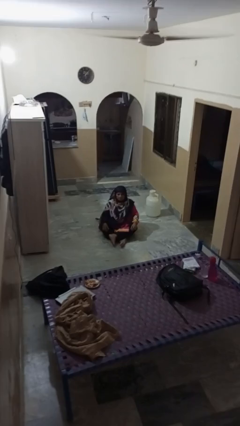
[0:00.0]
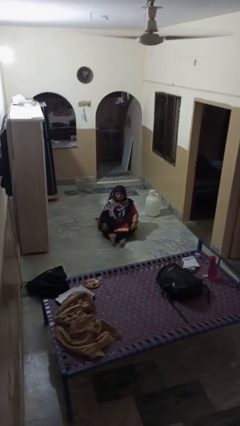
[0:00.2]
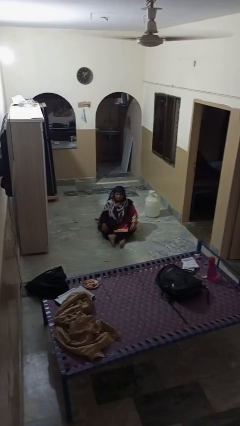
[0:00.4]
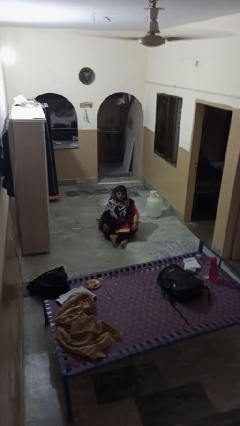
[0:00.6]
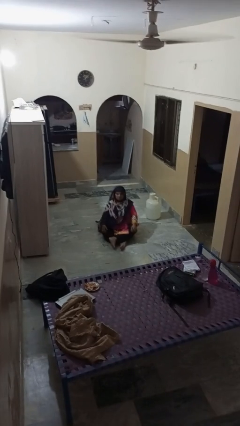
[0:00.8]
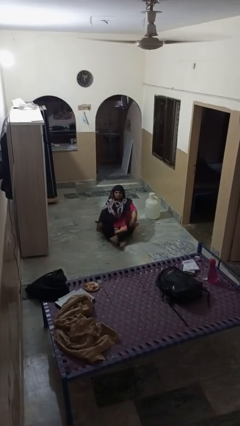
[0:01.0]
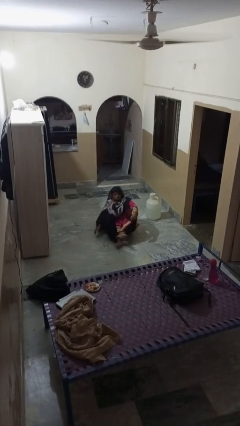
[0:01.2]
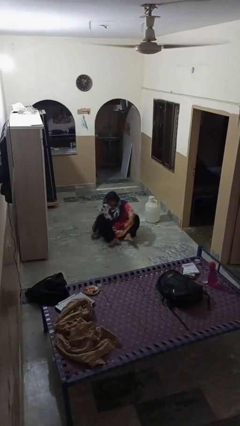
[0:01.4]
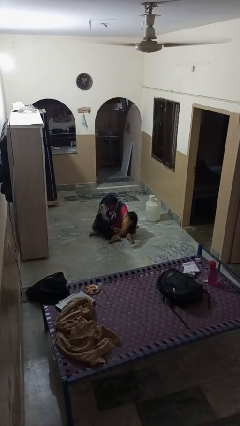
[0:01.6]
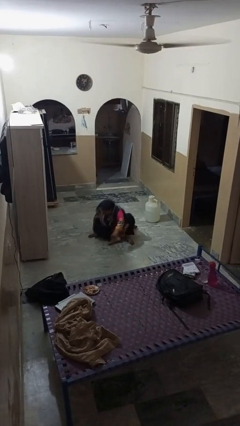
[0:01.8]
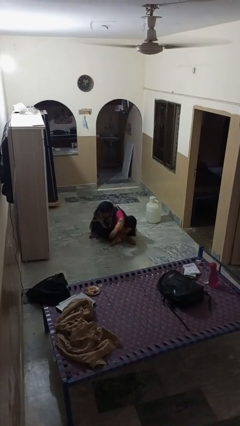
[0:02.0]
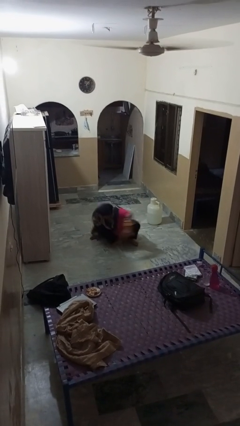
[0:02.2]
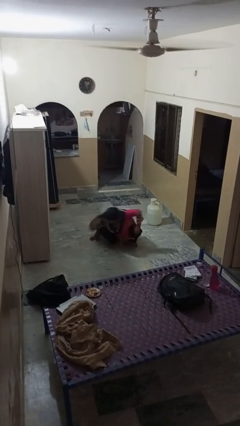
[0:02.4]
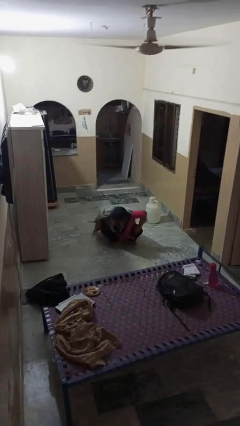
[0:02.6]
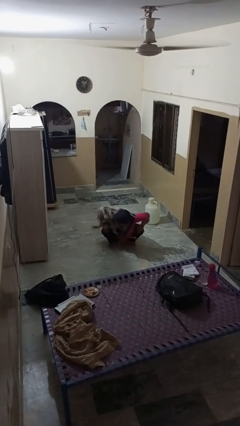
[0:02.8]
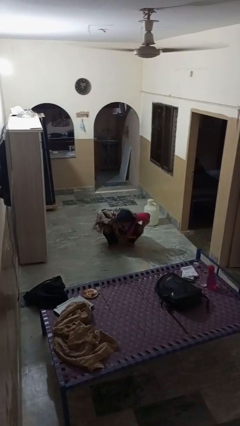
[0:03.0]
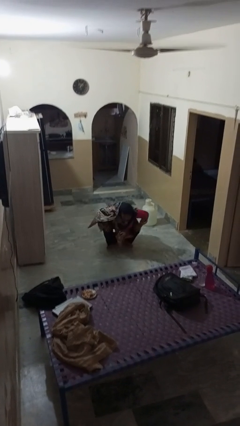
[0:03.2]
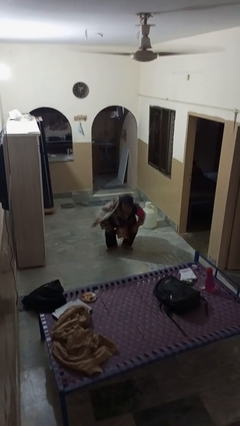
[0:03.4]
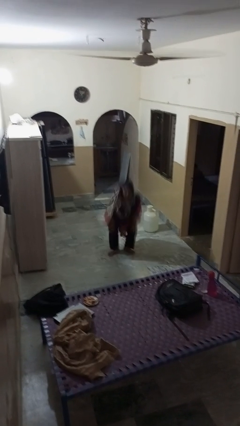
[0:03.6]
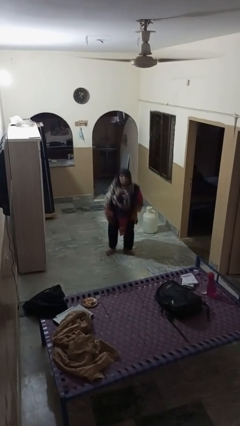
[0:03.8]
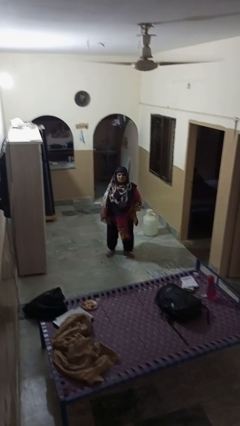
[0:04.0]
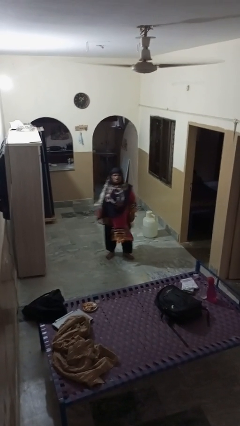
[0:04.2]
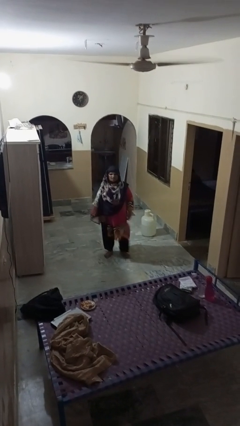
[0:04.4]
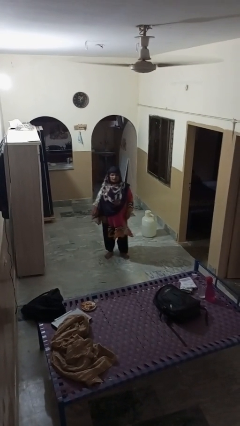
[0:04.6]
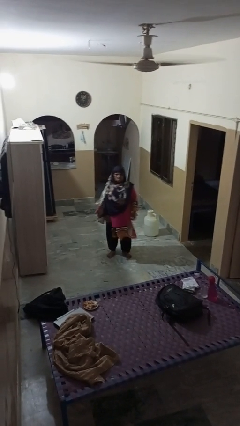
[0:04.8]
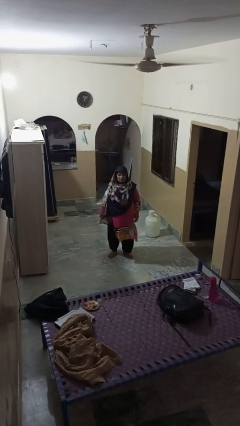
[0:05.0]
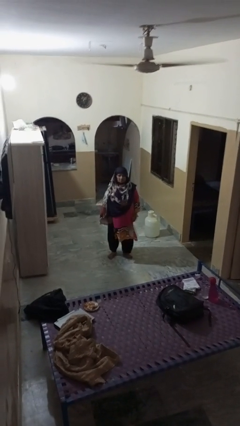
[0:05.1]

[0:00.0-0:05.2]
person stands up from floor

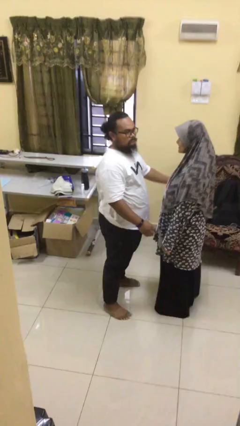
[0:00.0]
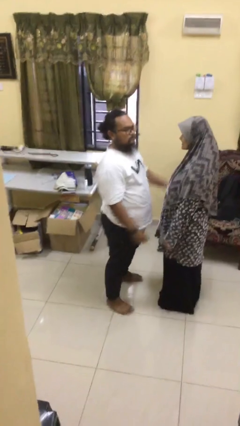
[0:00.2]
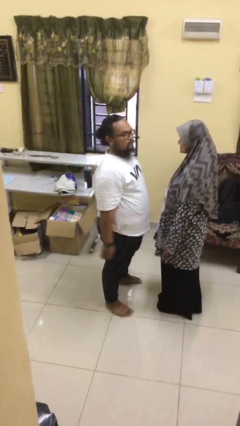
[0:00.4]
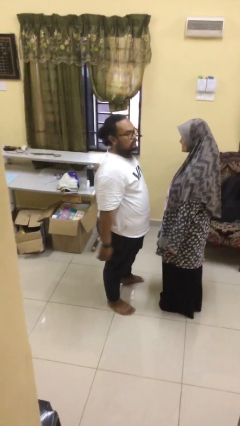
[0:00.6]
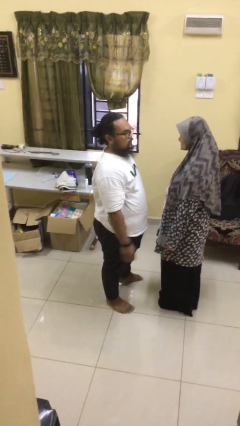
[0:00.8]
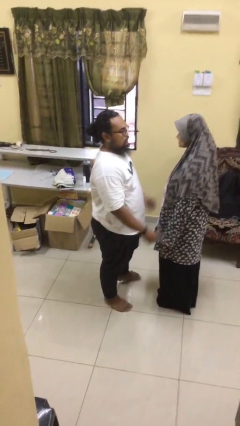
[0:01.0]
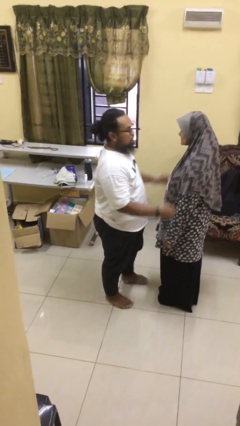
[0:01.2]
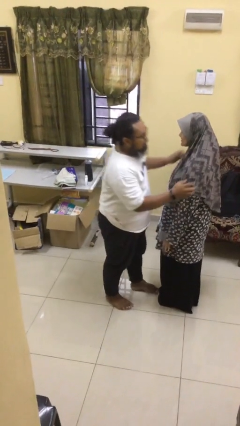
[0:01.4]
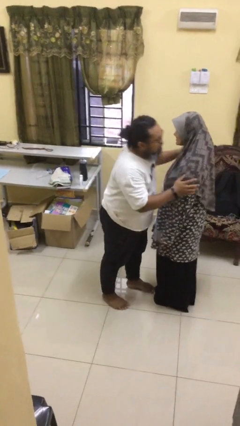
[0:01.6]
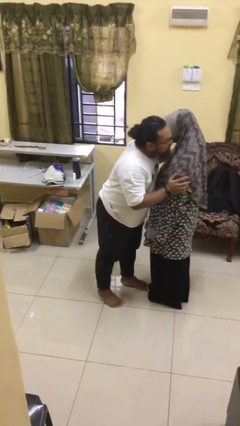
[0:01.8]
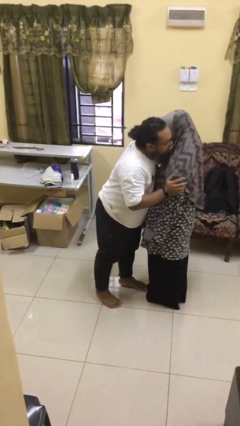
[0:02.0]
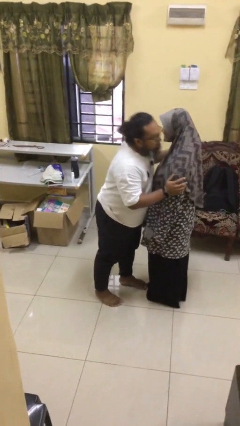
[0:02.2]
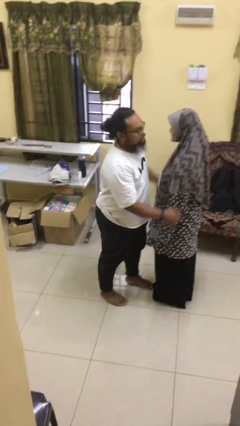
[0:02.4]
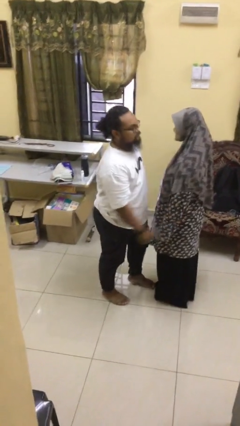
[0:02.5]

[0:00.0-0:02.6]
person kisses cheek of person

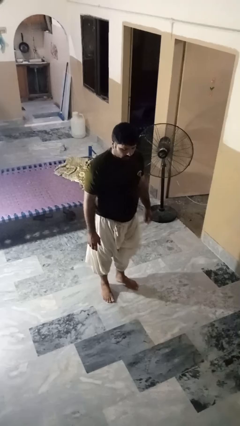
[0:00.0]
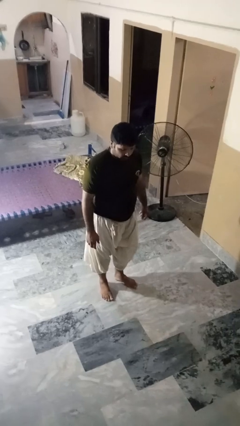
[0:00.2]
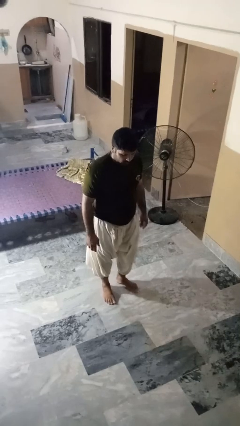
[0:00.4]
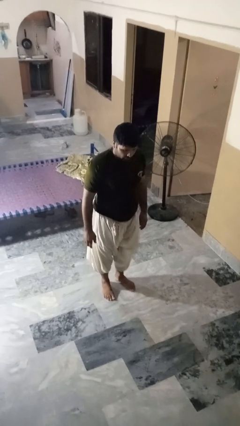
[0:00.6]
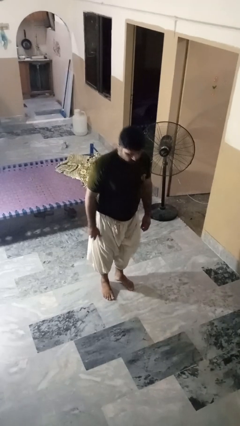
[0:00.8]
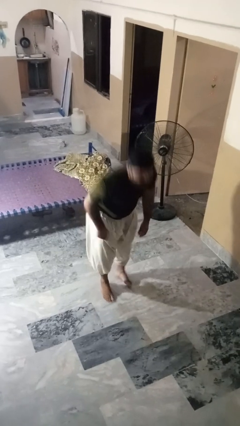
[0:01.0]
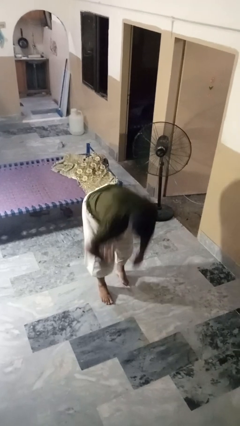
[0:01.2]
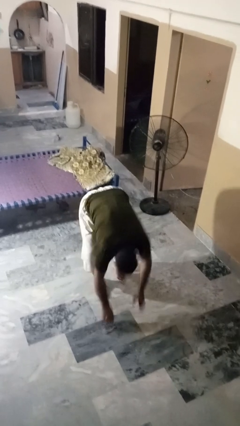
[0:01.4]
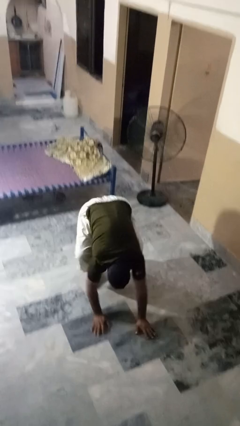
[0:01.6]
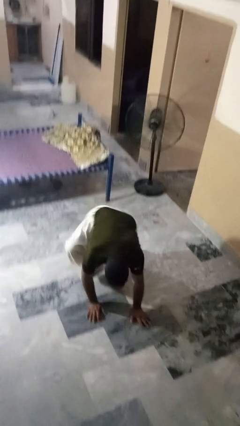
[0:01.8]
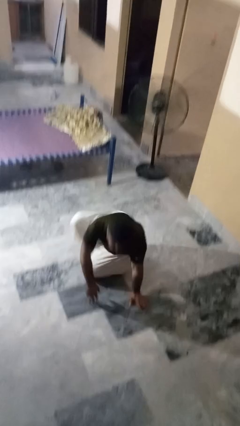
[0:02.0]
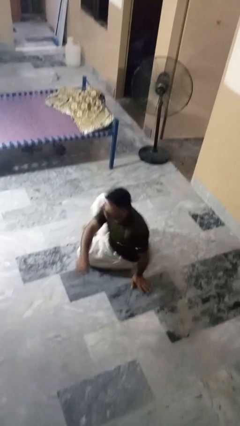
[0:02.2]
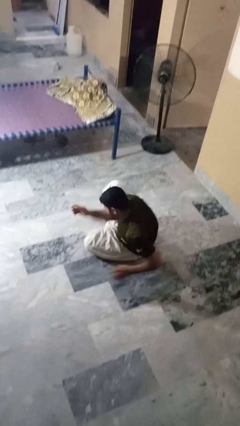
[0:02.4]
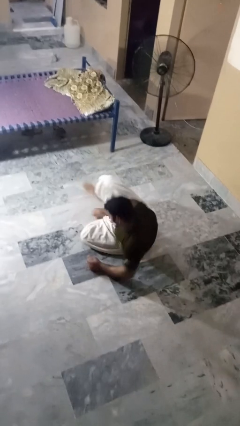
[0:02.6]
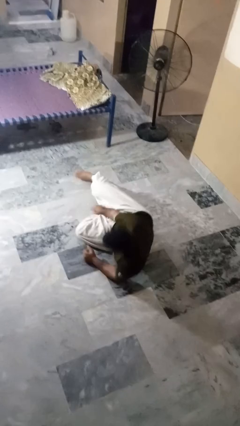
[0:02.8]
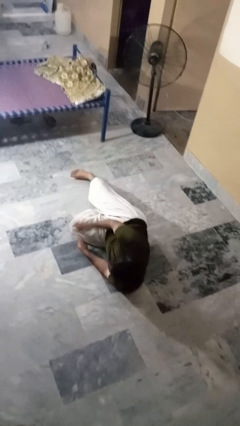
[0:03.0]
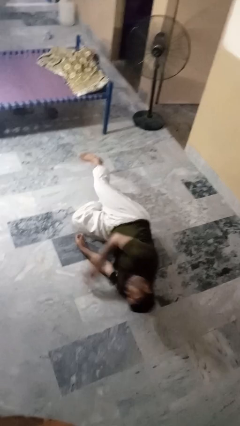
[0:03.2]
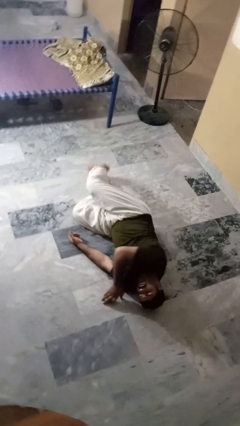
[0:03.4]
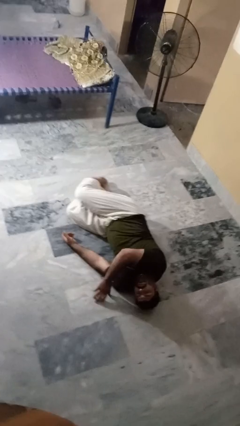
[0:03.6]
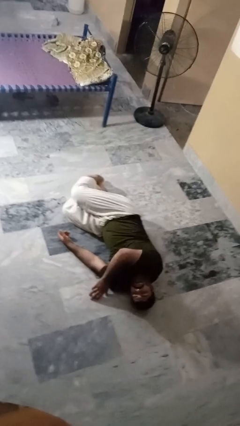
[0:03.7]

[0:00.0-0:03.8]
person falls while standing

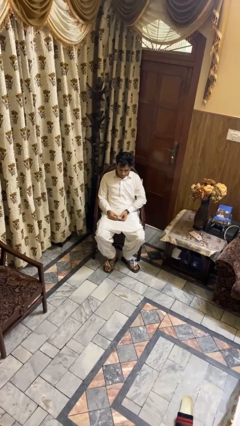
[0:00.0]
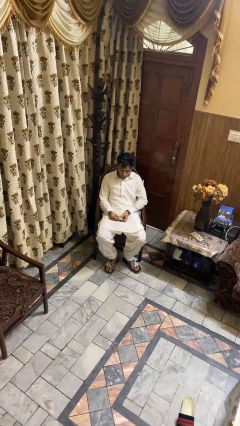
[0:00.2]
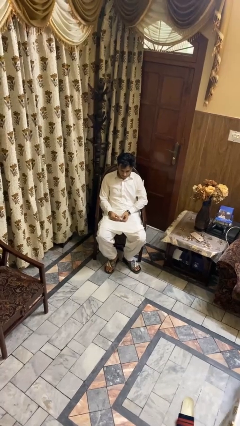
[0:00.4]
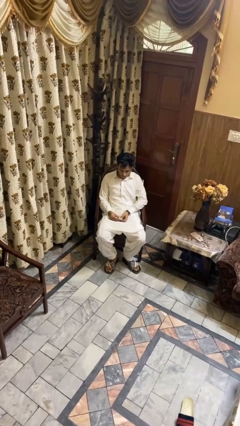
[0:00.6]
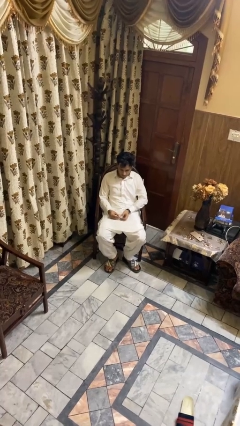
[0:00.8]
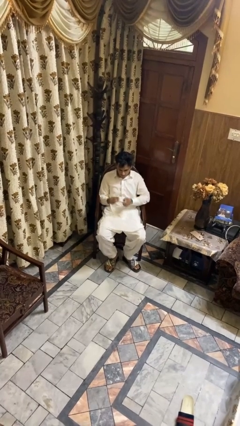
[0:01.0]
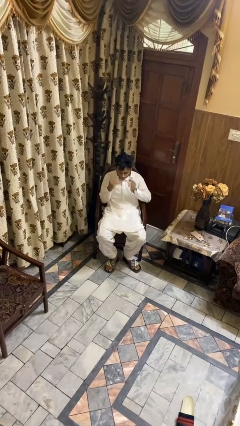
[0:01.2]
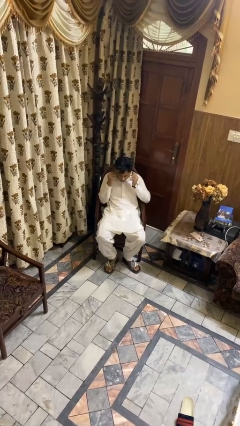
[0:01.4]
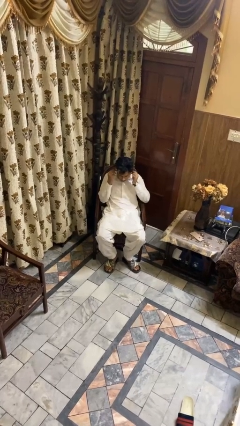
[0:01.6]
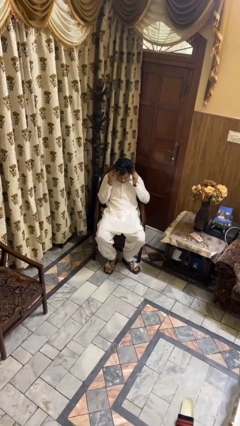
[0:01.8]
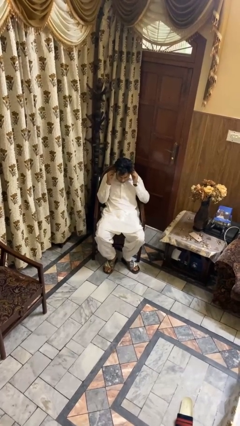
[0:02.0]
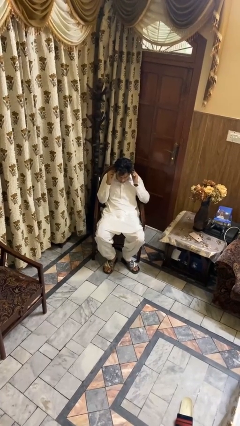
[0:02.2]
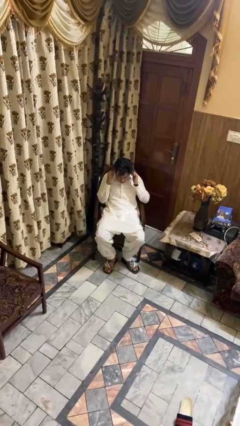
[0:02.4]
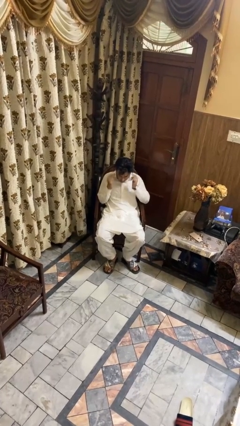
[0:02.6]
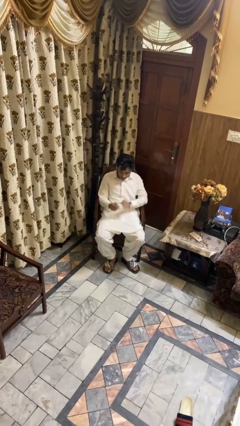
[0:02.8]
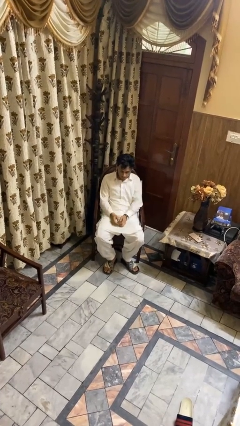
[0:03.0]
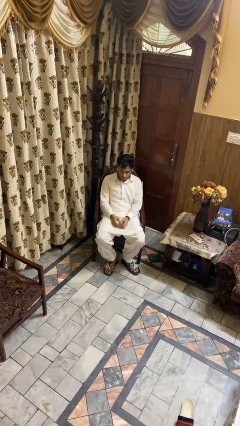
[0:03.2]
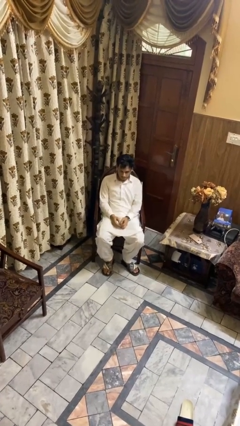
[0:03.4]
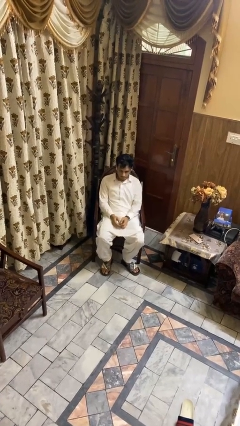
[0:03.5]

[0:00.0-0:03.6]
person puts on headphones

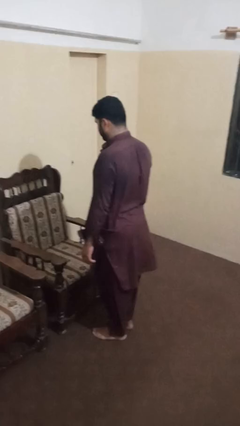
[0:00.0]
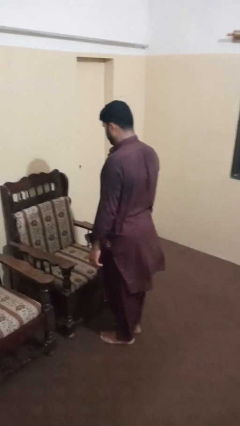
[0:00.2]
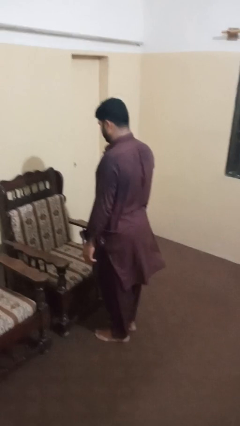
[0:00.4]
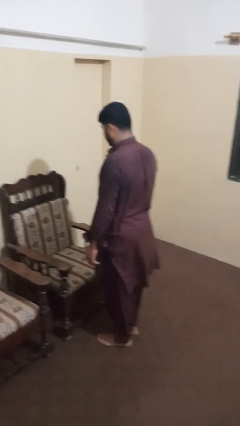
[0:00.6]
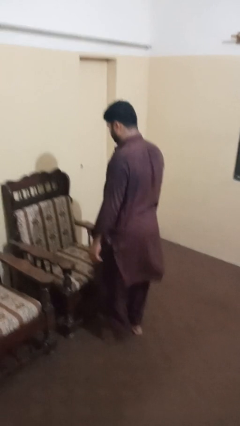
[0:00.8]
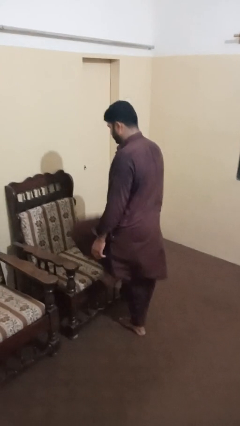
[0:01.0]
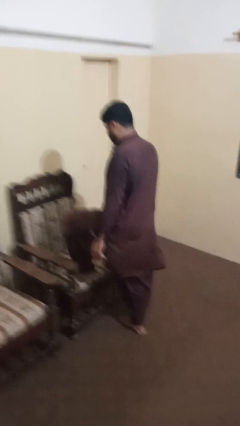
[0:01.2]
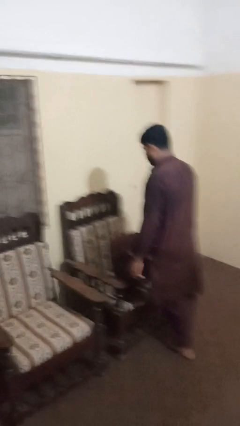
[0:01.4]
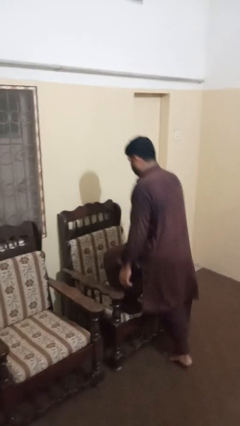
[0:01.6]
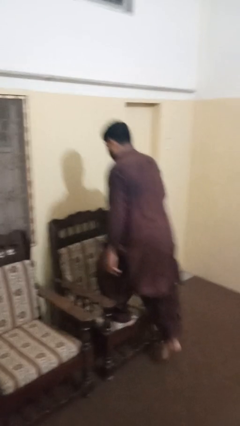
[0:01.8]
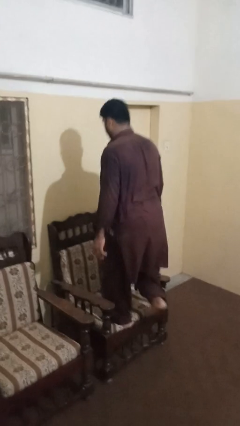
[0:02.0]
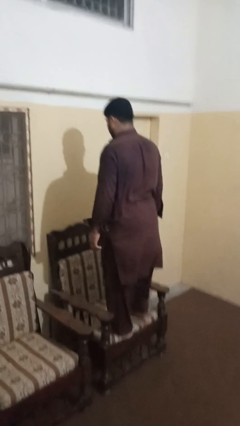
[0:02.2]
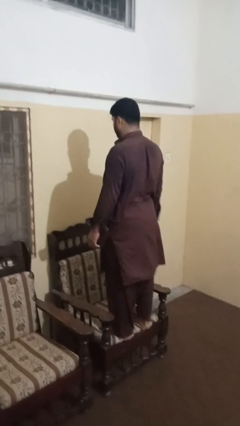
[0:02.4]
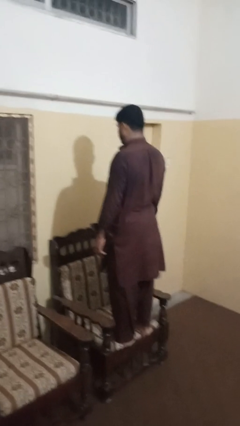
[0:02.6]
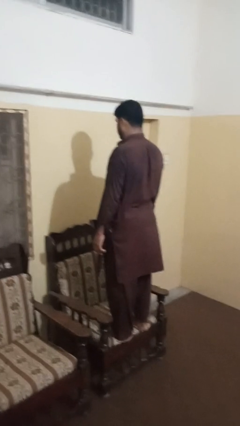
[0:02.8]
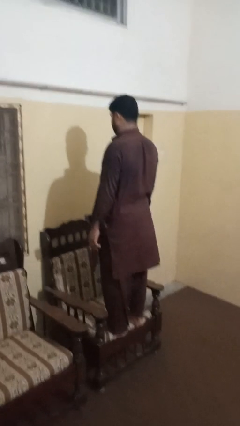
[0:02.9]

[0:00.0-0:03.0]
person climbs on chair
